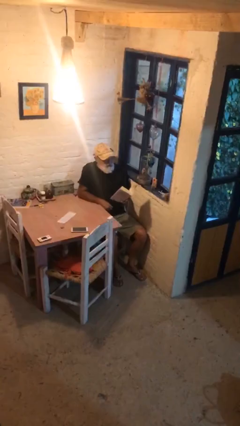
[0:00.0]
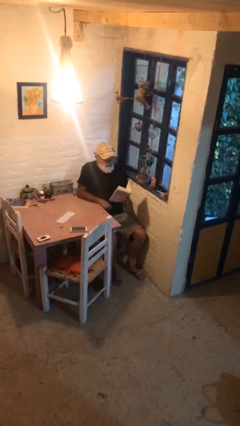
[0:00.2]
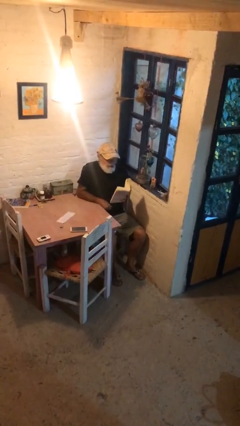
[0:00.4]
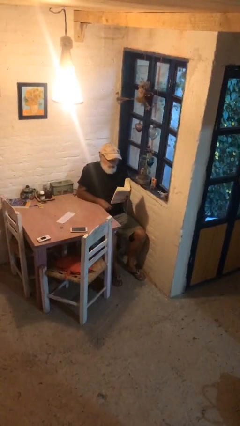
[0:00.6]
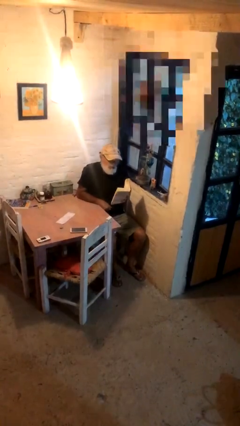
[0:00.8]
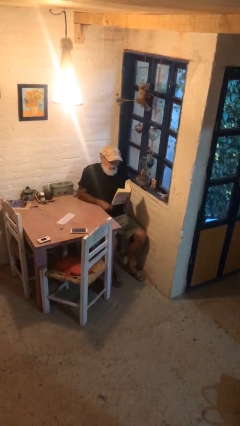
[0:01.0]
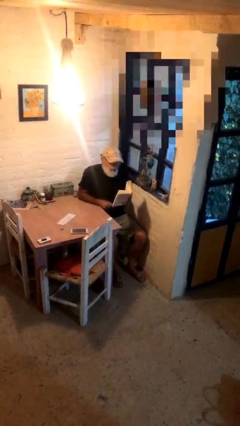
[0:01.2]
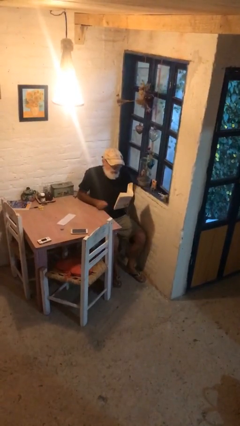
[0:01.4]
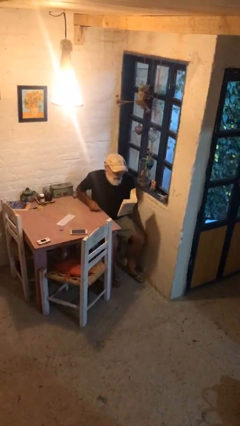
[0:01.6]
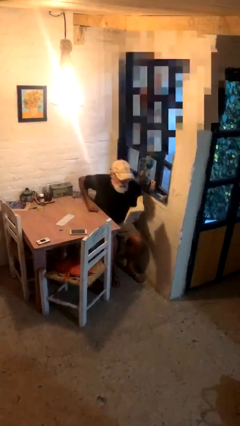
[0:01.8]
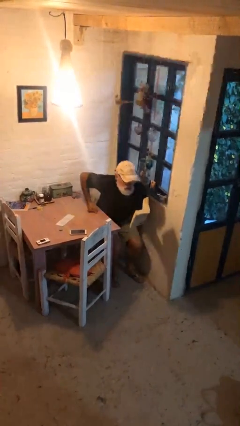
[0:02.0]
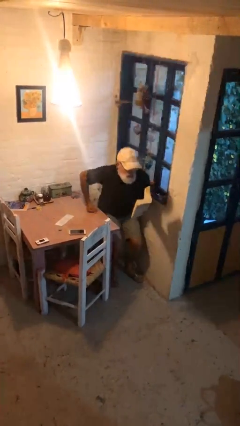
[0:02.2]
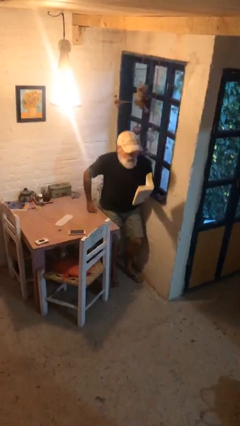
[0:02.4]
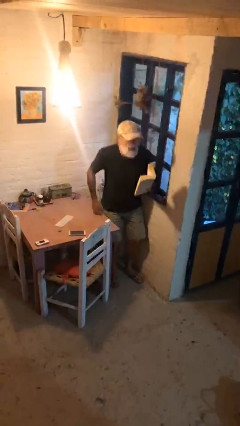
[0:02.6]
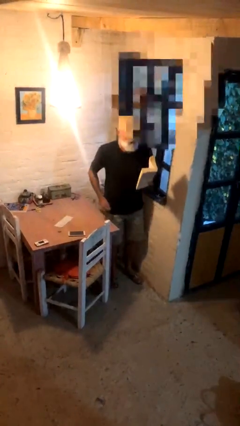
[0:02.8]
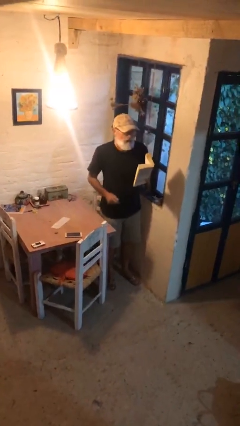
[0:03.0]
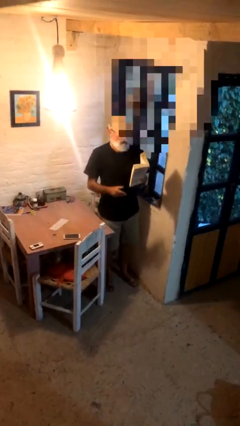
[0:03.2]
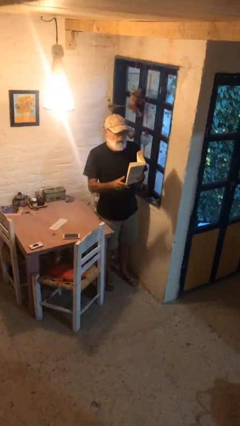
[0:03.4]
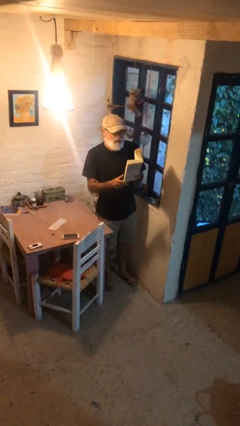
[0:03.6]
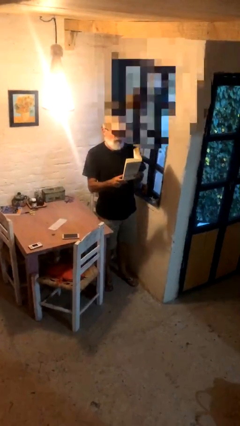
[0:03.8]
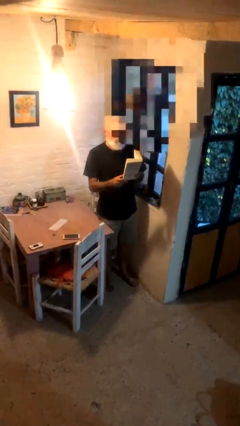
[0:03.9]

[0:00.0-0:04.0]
person stands up

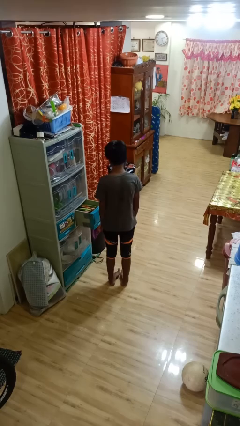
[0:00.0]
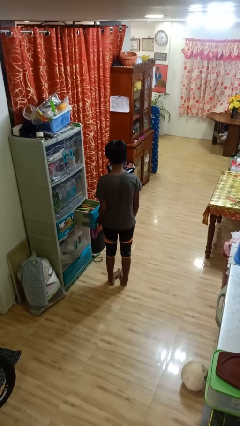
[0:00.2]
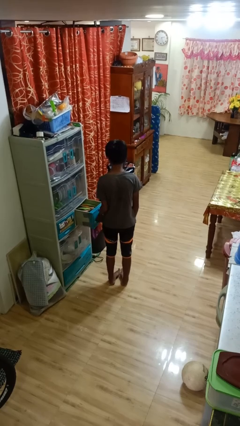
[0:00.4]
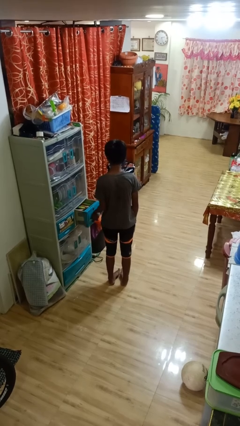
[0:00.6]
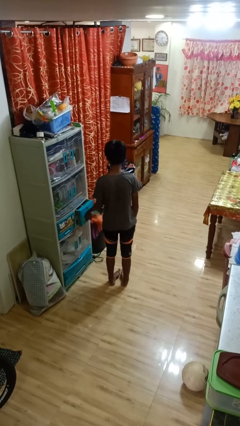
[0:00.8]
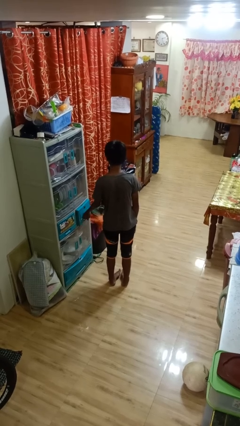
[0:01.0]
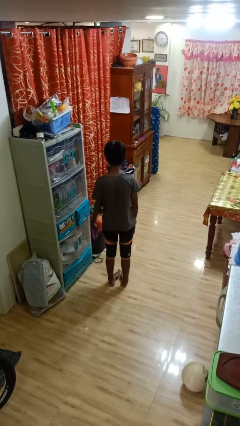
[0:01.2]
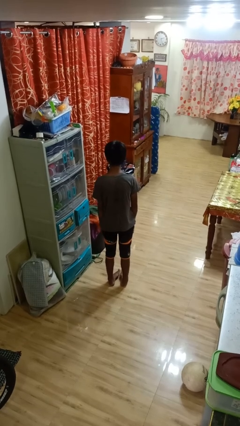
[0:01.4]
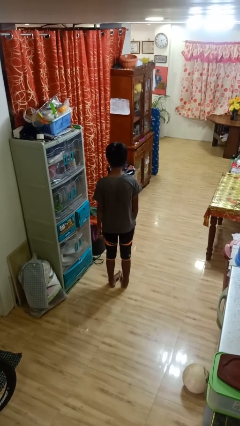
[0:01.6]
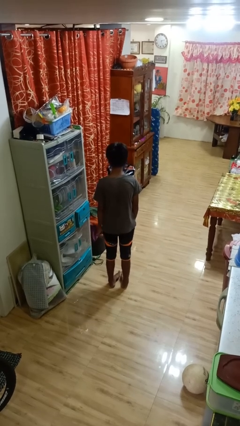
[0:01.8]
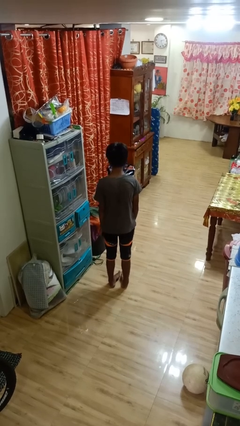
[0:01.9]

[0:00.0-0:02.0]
person closes kitchen drawer

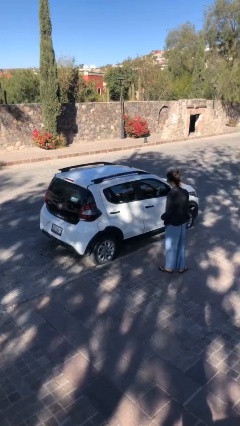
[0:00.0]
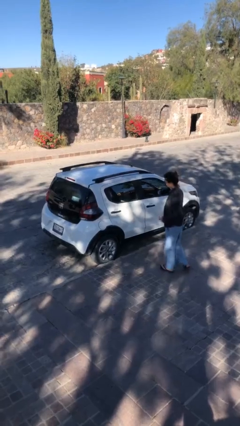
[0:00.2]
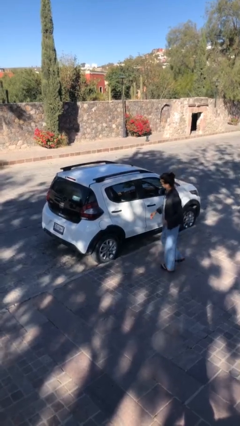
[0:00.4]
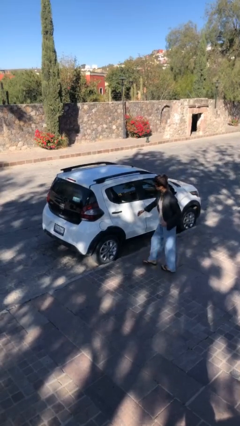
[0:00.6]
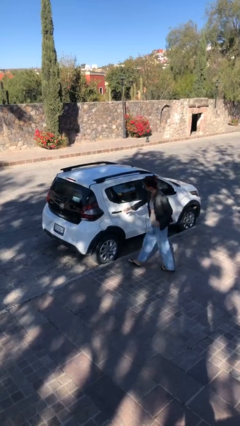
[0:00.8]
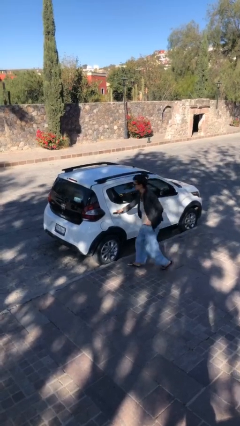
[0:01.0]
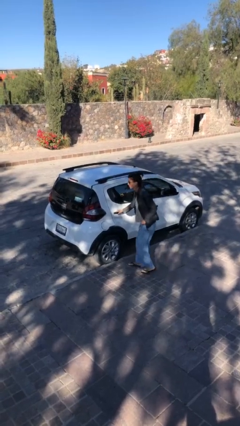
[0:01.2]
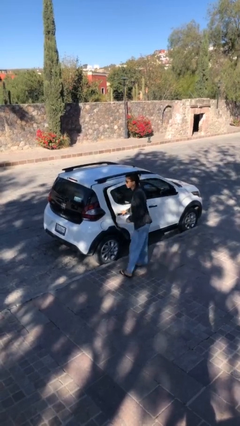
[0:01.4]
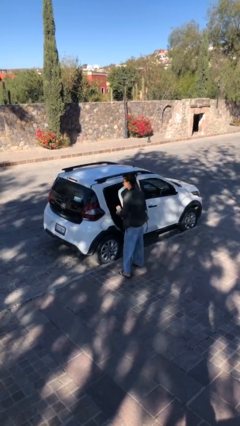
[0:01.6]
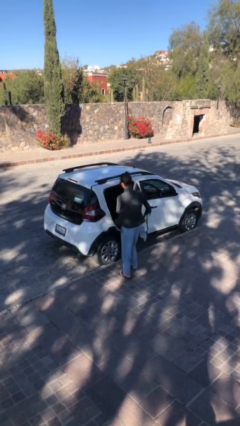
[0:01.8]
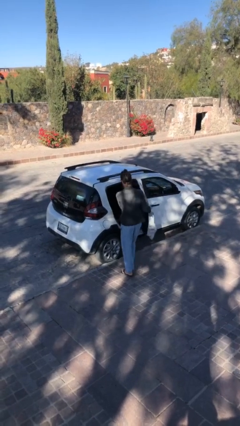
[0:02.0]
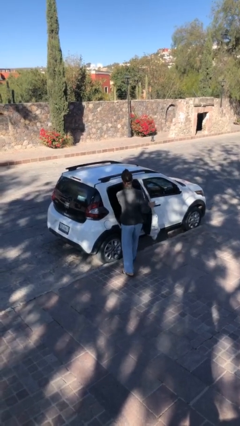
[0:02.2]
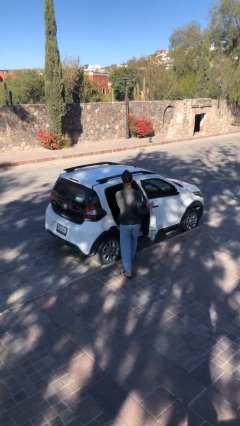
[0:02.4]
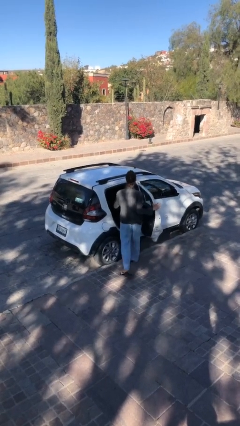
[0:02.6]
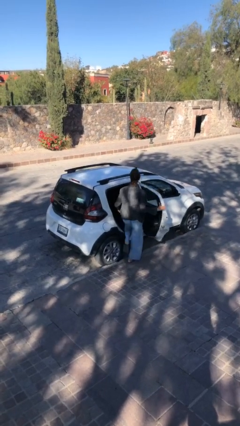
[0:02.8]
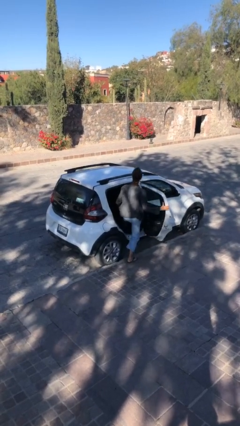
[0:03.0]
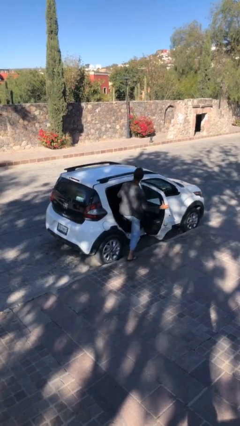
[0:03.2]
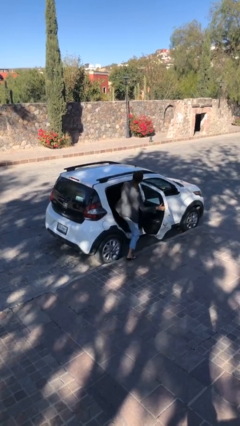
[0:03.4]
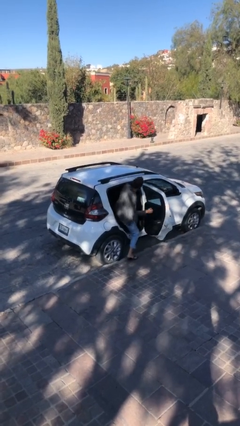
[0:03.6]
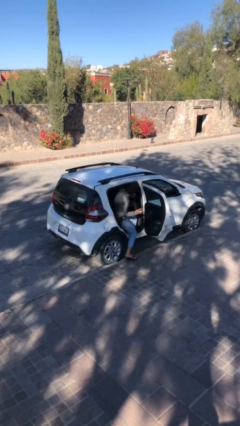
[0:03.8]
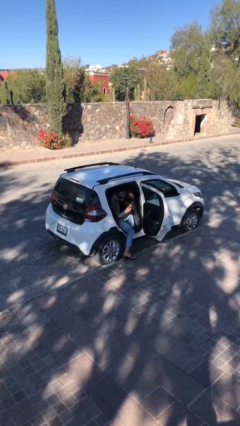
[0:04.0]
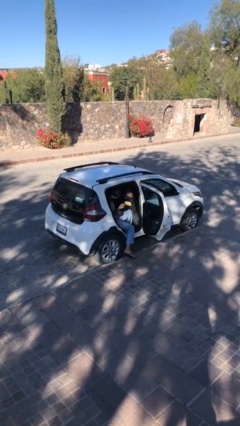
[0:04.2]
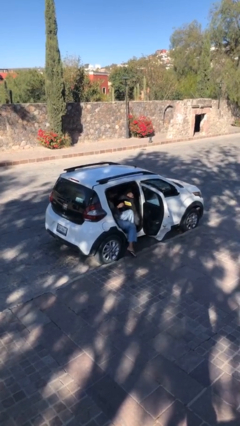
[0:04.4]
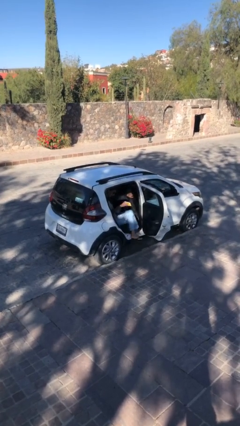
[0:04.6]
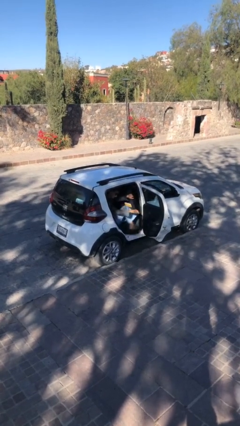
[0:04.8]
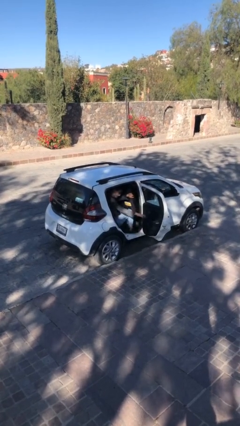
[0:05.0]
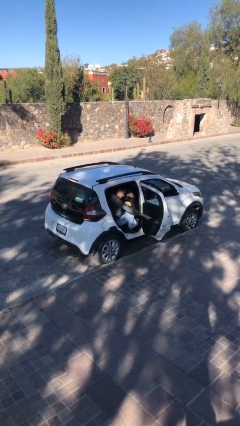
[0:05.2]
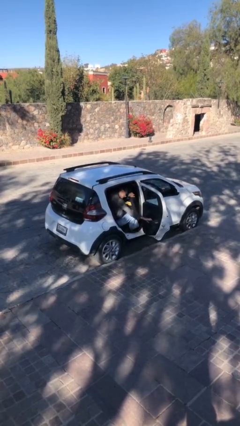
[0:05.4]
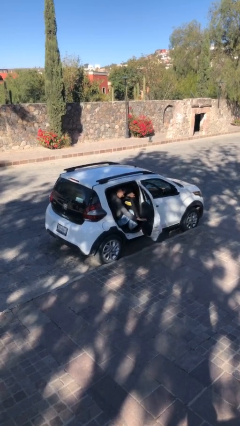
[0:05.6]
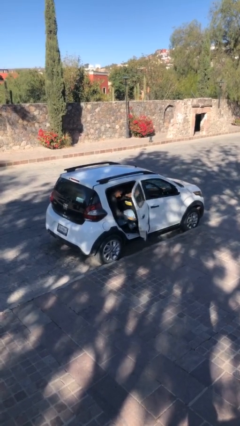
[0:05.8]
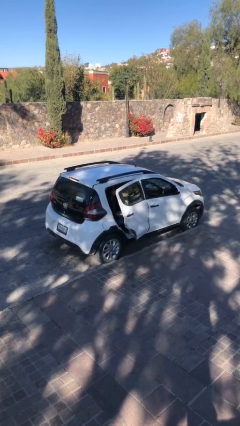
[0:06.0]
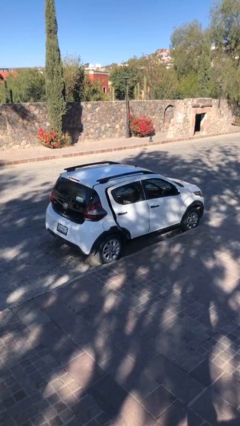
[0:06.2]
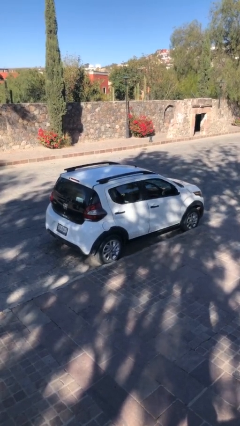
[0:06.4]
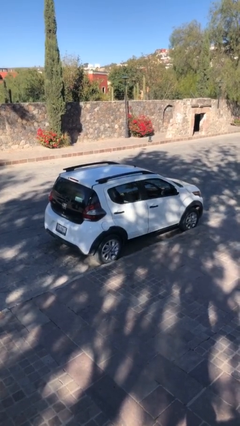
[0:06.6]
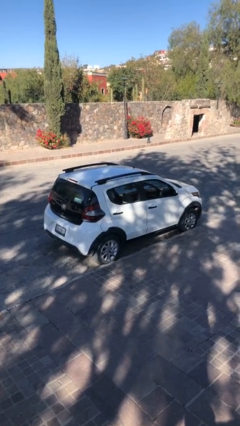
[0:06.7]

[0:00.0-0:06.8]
car picks up person

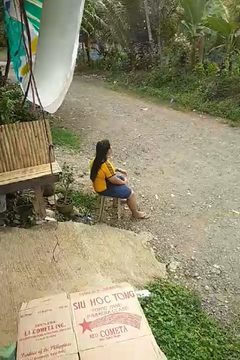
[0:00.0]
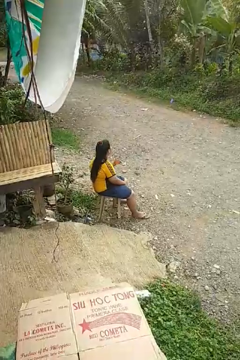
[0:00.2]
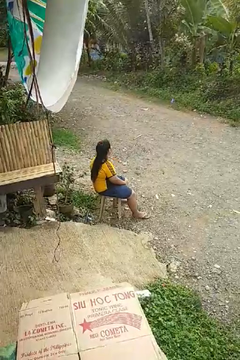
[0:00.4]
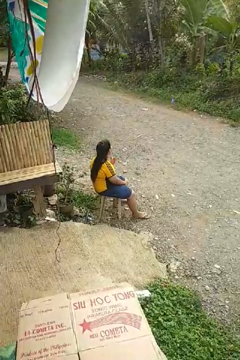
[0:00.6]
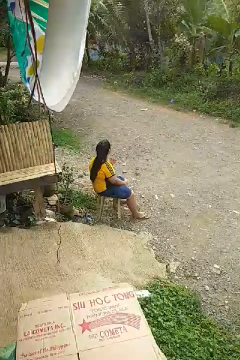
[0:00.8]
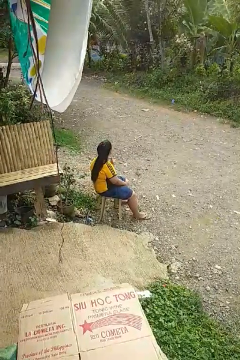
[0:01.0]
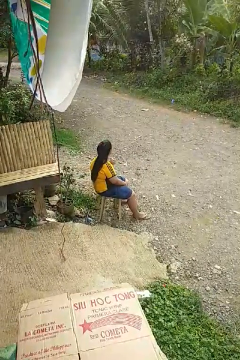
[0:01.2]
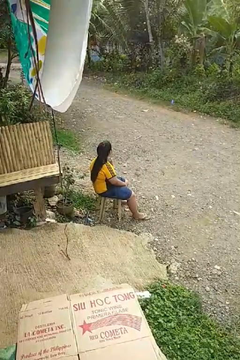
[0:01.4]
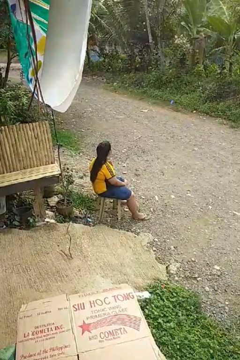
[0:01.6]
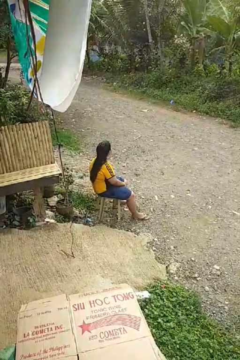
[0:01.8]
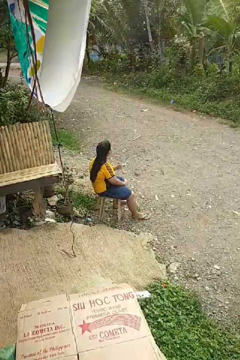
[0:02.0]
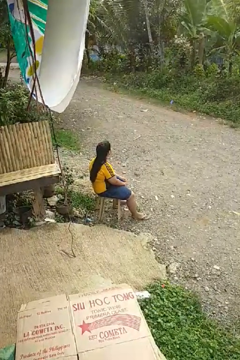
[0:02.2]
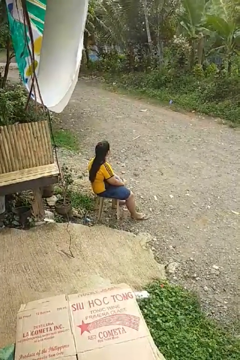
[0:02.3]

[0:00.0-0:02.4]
person drums on chest

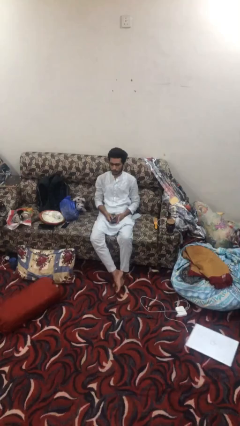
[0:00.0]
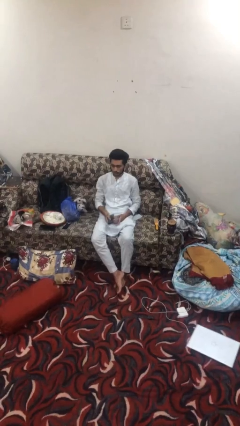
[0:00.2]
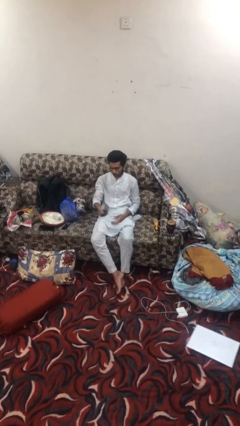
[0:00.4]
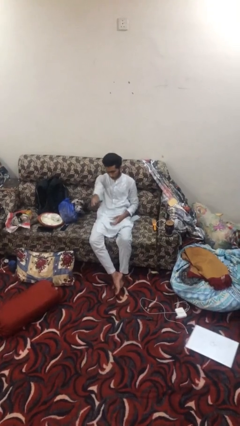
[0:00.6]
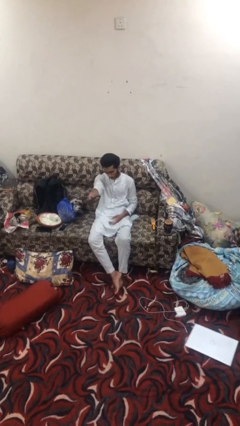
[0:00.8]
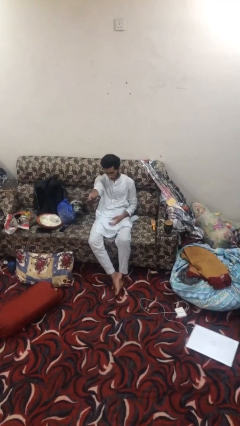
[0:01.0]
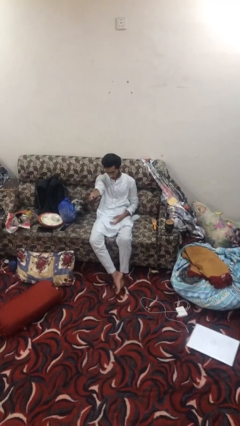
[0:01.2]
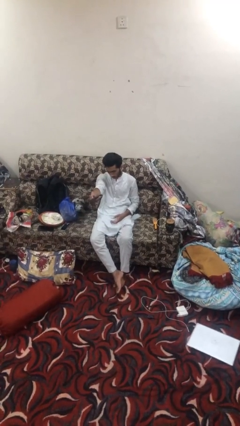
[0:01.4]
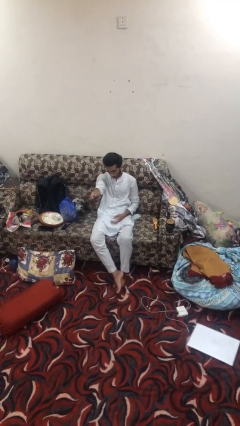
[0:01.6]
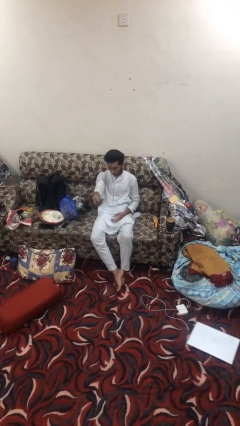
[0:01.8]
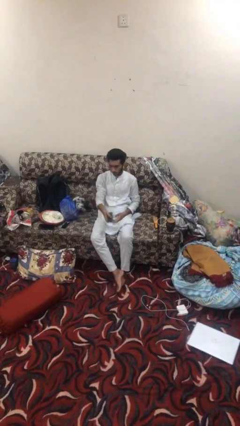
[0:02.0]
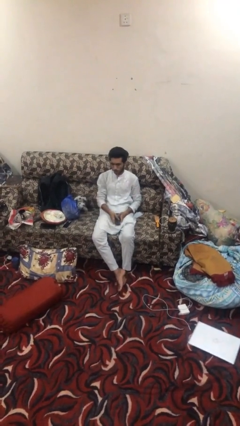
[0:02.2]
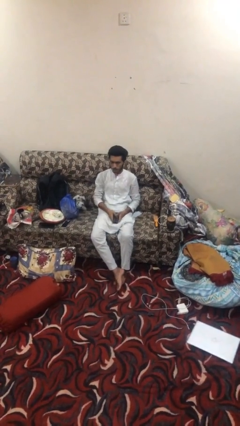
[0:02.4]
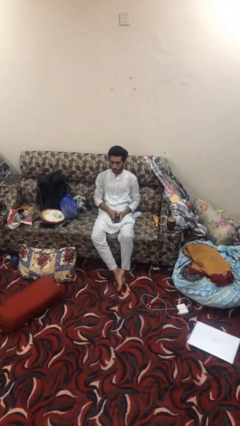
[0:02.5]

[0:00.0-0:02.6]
person uses television remote
